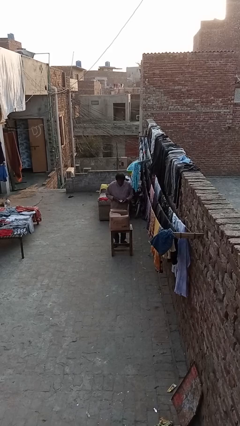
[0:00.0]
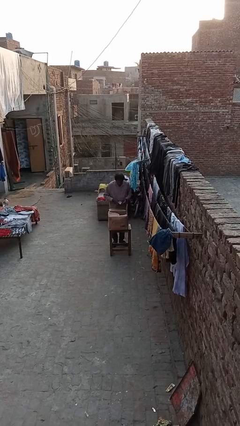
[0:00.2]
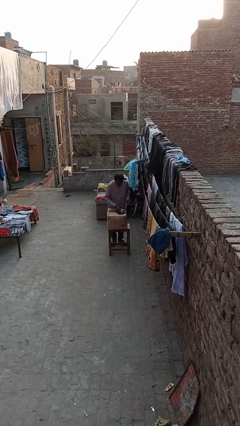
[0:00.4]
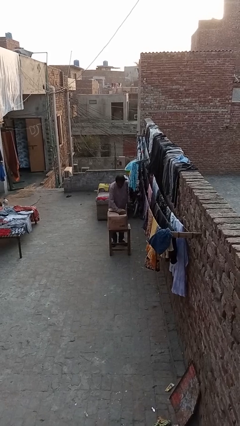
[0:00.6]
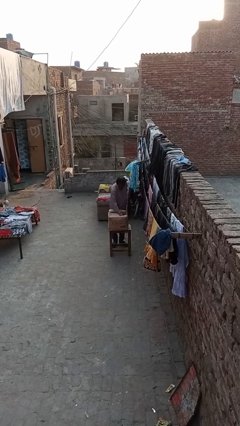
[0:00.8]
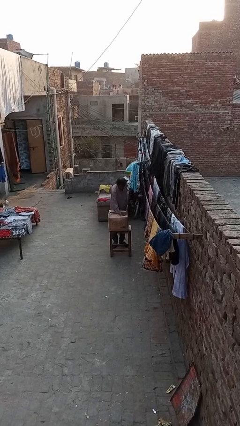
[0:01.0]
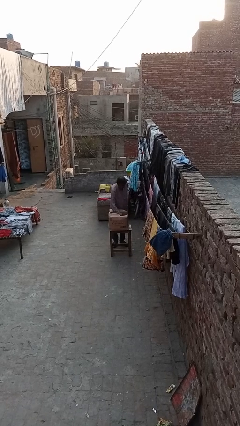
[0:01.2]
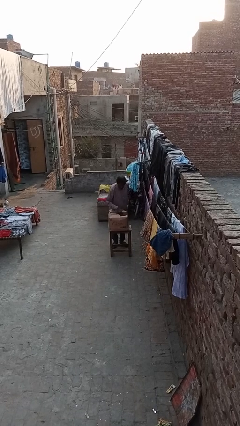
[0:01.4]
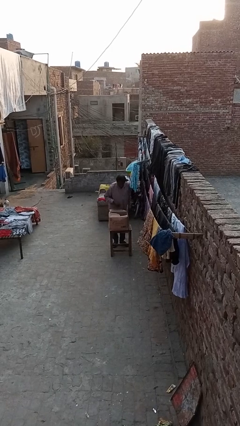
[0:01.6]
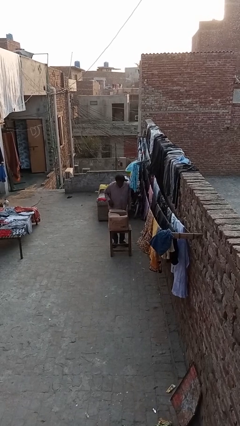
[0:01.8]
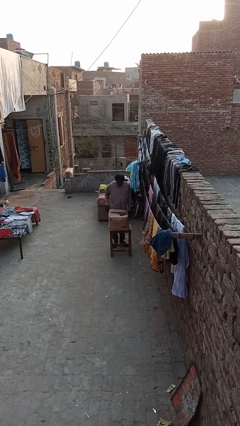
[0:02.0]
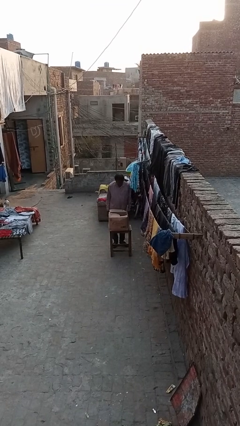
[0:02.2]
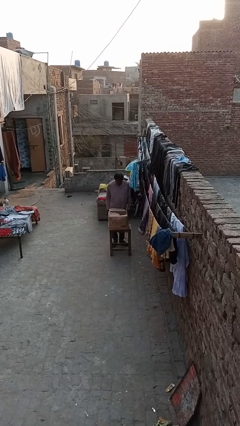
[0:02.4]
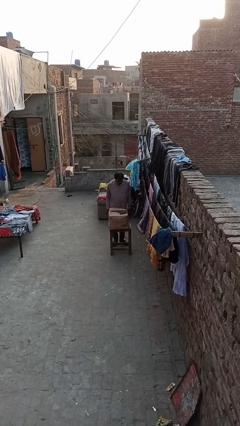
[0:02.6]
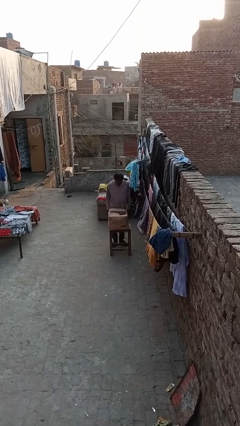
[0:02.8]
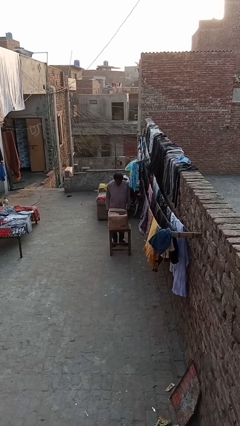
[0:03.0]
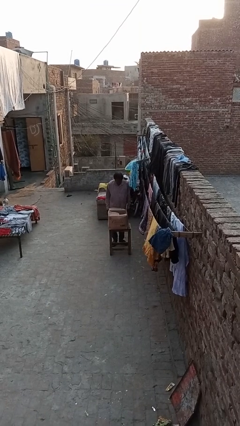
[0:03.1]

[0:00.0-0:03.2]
person puts object into box

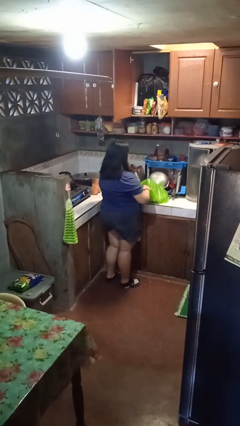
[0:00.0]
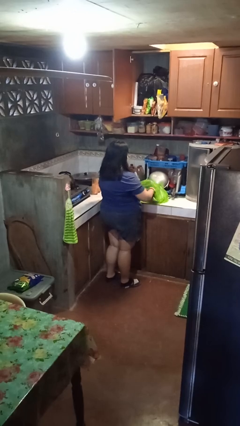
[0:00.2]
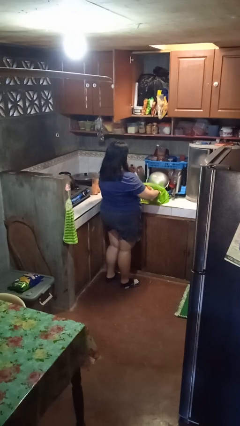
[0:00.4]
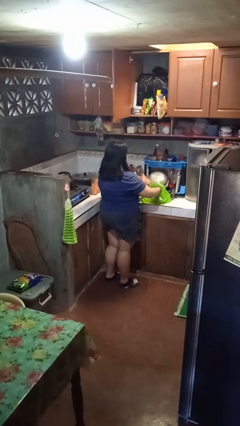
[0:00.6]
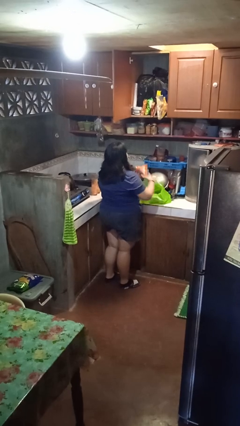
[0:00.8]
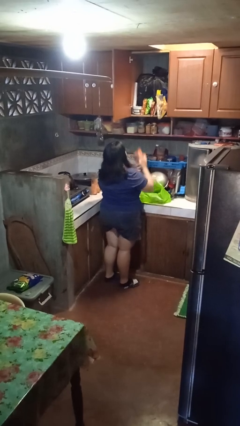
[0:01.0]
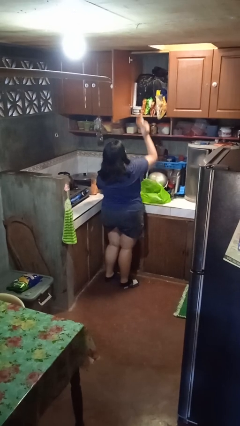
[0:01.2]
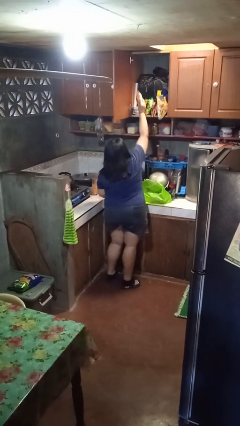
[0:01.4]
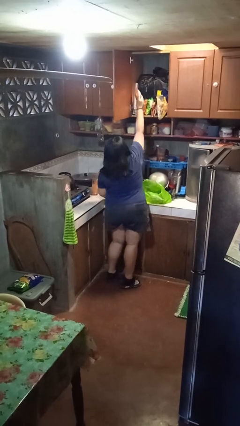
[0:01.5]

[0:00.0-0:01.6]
person loads groceries into cabinet

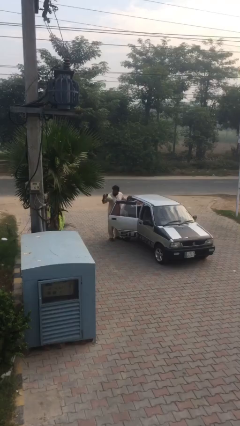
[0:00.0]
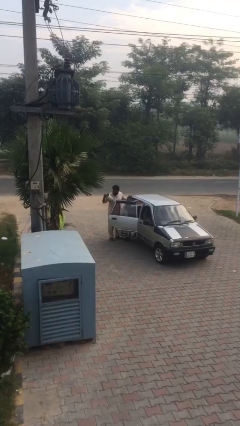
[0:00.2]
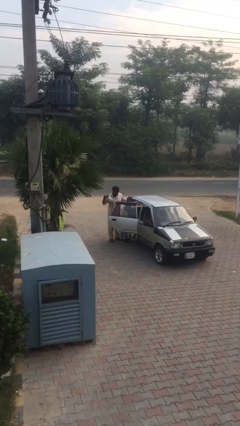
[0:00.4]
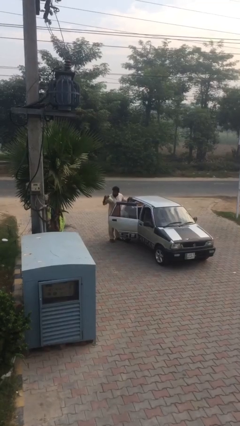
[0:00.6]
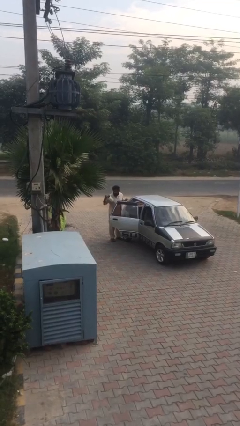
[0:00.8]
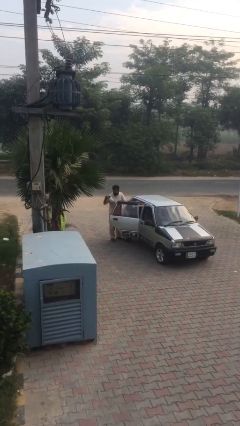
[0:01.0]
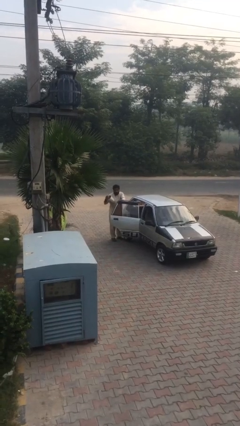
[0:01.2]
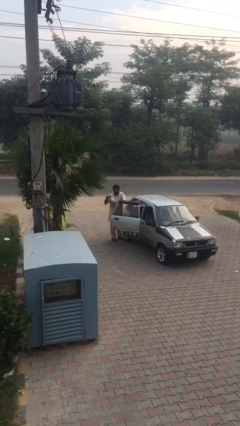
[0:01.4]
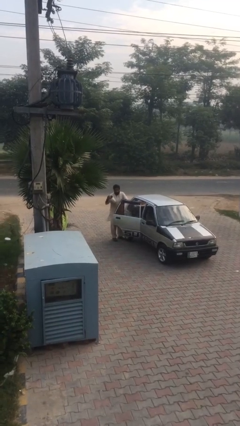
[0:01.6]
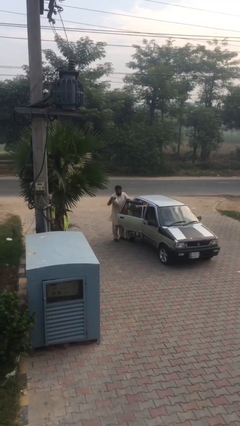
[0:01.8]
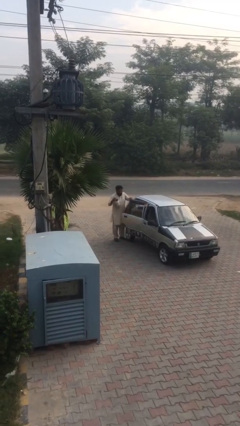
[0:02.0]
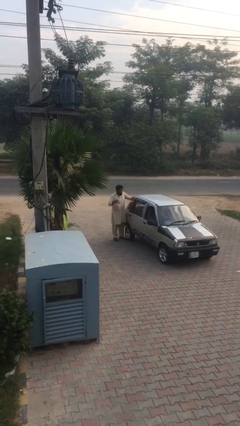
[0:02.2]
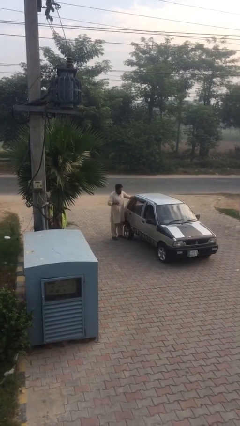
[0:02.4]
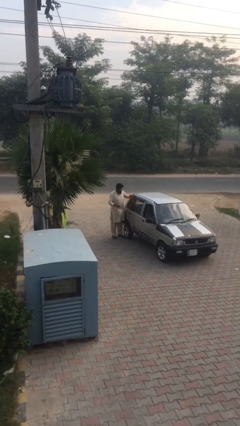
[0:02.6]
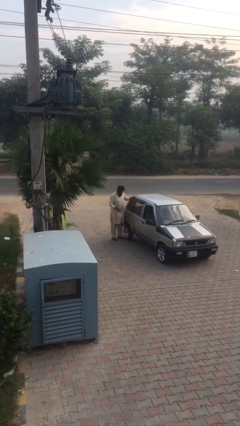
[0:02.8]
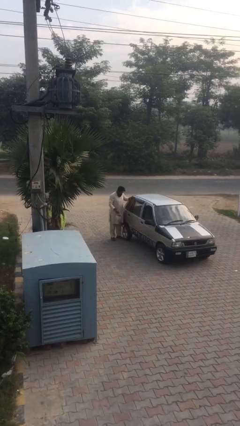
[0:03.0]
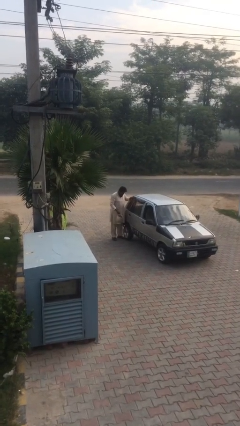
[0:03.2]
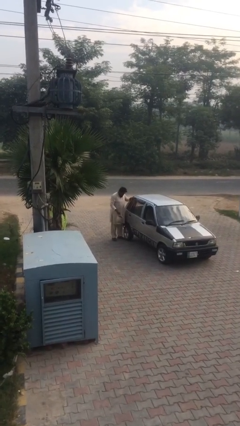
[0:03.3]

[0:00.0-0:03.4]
person closes car door

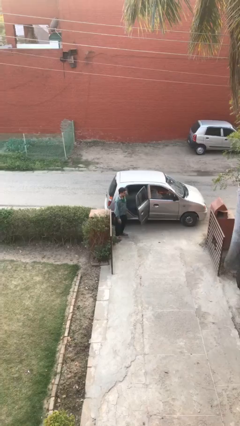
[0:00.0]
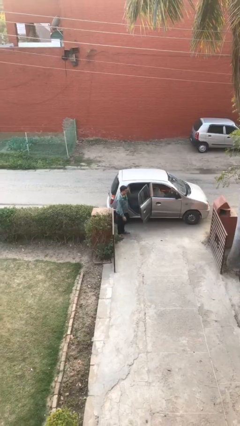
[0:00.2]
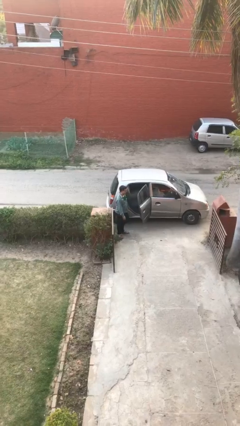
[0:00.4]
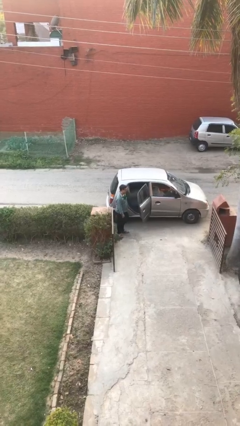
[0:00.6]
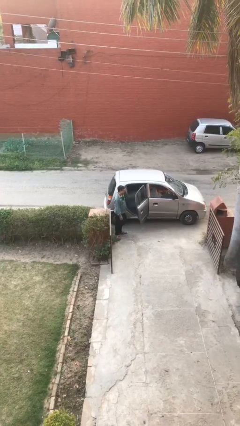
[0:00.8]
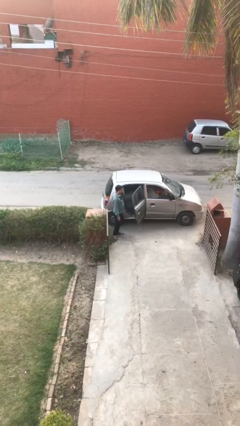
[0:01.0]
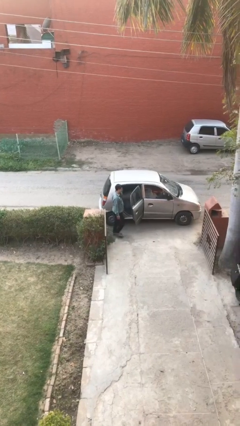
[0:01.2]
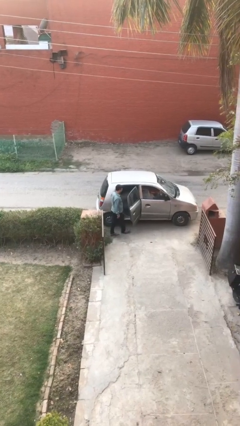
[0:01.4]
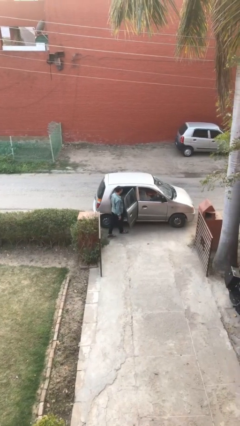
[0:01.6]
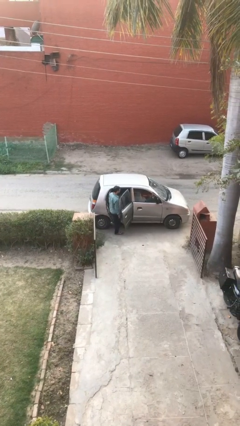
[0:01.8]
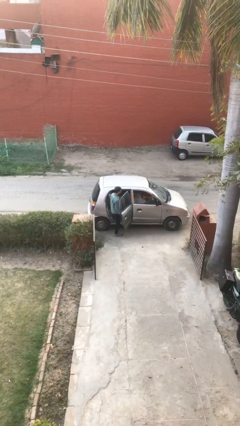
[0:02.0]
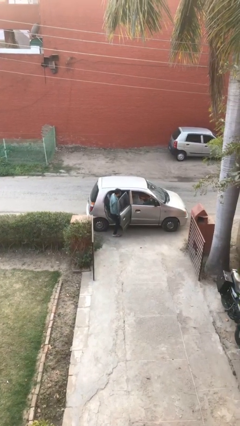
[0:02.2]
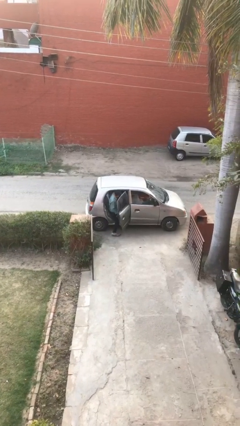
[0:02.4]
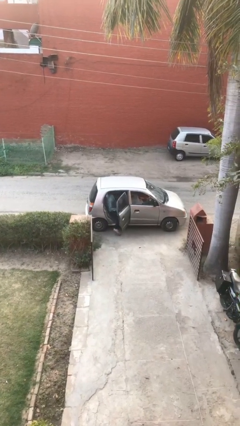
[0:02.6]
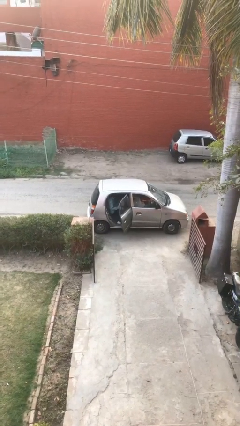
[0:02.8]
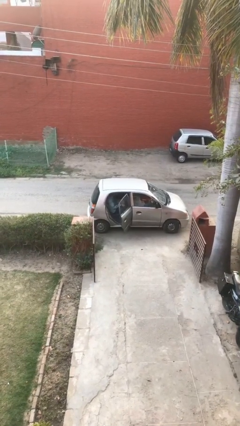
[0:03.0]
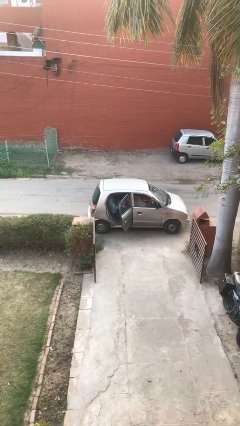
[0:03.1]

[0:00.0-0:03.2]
person enters car

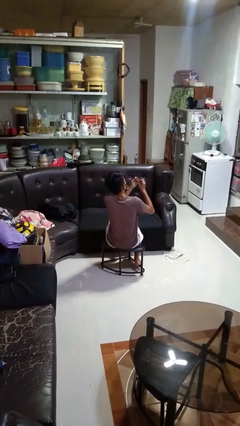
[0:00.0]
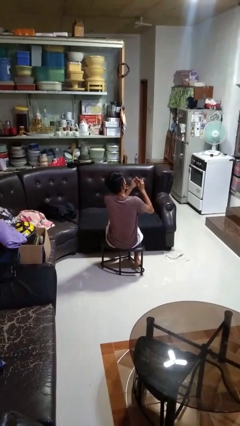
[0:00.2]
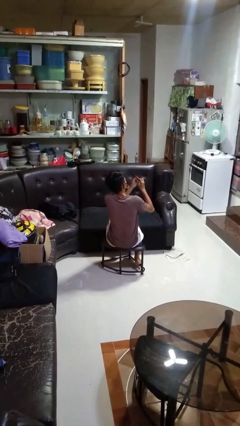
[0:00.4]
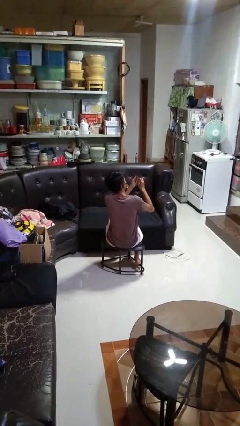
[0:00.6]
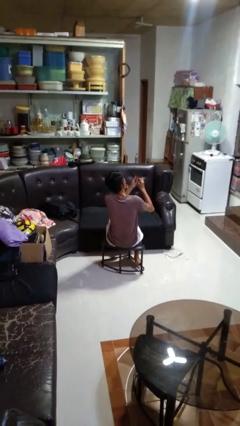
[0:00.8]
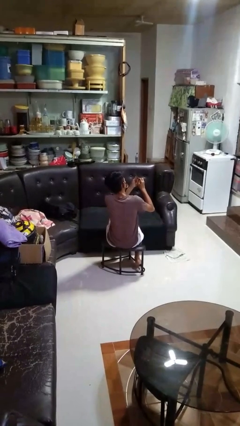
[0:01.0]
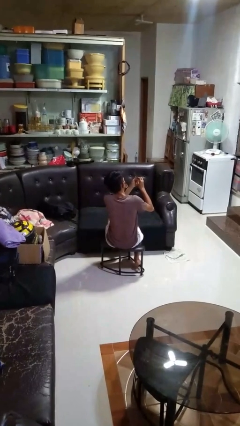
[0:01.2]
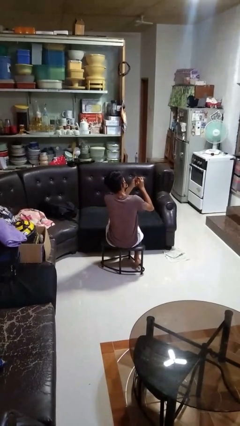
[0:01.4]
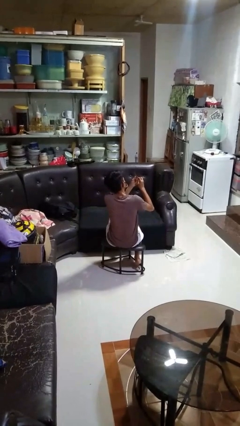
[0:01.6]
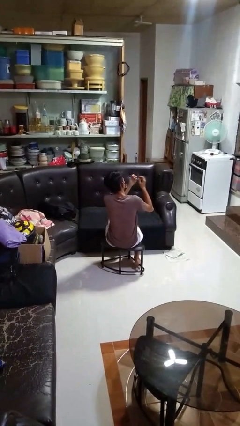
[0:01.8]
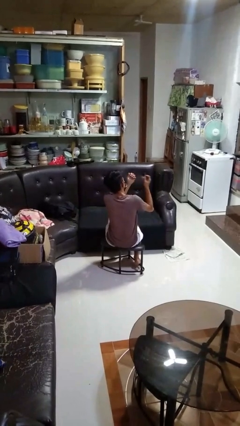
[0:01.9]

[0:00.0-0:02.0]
person files fingernails

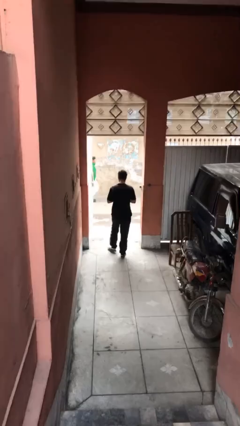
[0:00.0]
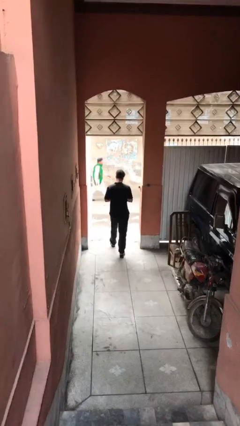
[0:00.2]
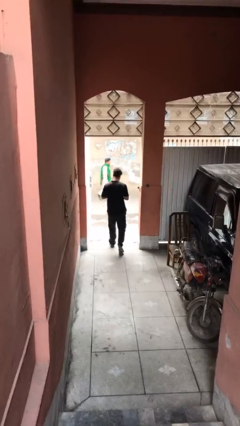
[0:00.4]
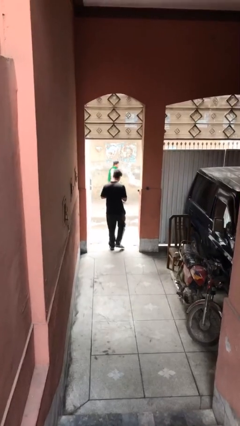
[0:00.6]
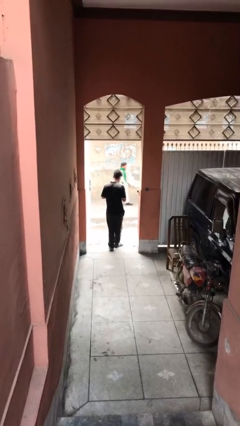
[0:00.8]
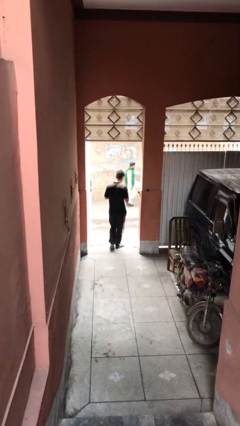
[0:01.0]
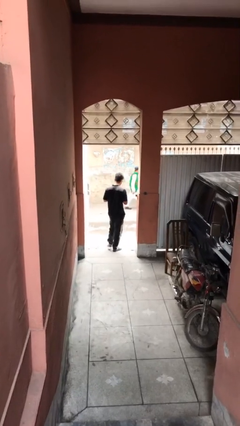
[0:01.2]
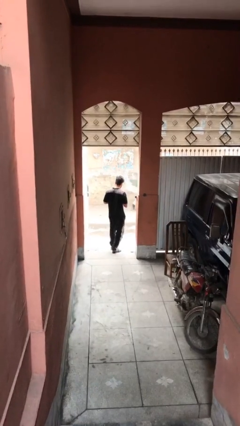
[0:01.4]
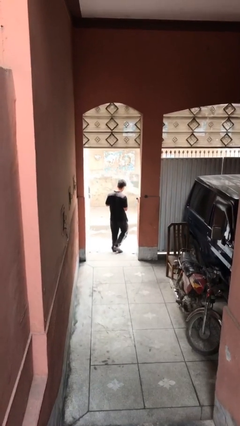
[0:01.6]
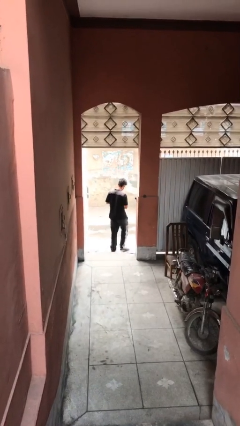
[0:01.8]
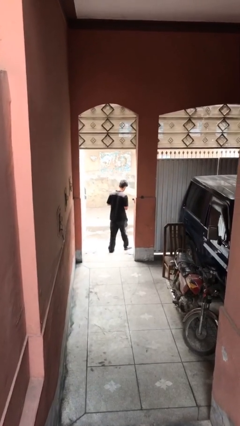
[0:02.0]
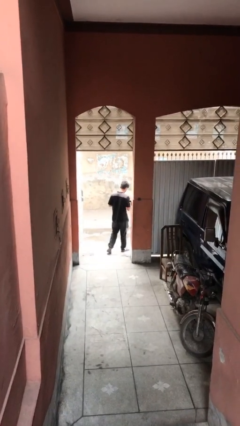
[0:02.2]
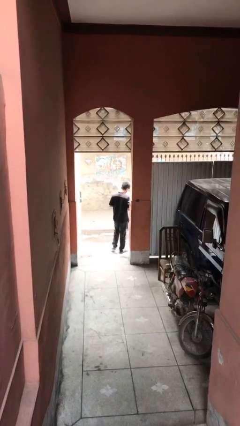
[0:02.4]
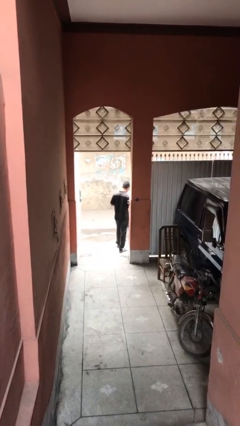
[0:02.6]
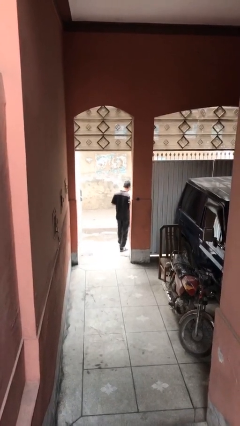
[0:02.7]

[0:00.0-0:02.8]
person exits scene through structure

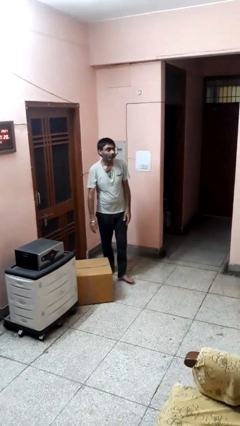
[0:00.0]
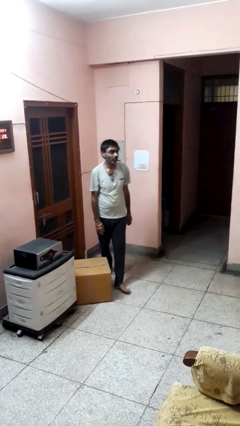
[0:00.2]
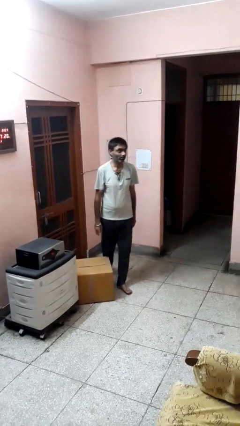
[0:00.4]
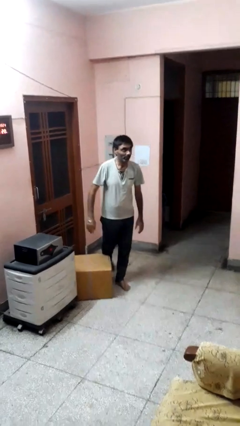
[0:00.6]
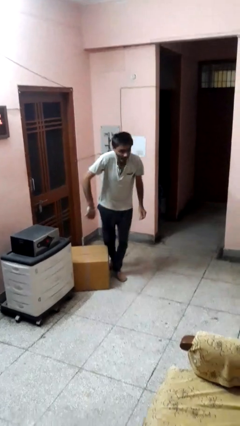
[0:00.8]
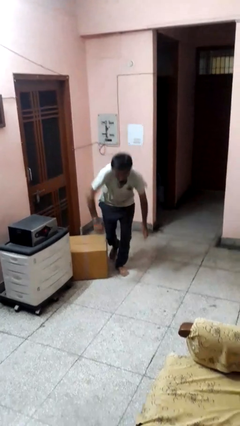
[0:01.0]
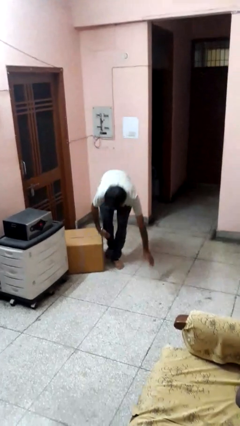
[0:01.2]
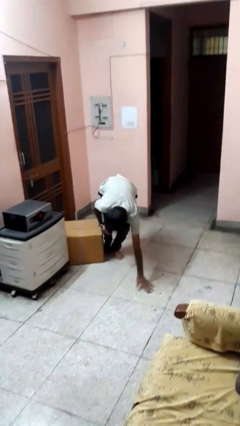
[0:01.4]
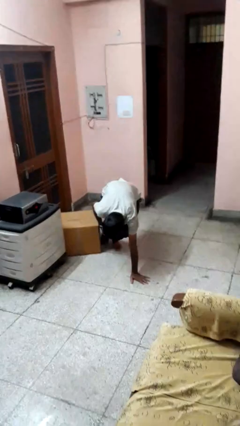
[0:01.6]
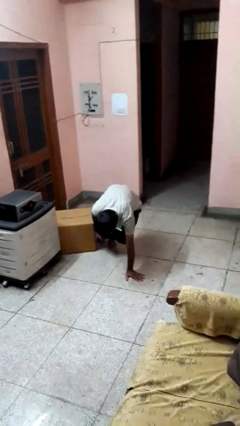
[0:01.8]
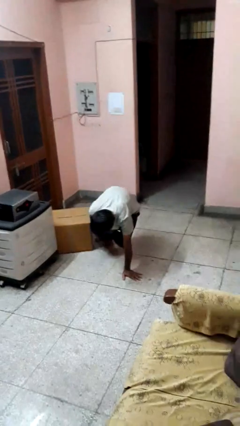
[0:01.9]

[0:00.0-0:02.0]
person trips on object on floor
